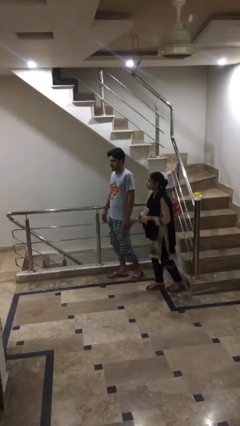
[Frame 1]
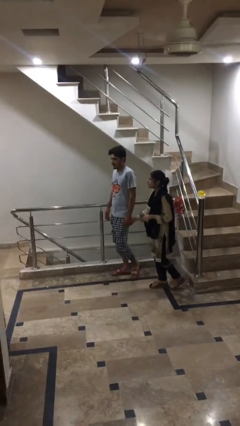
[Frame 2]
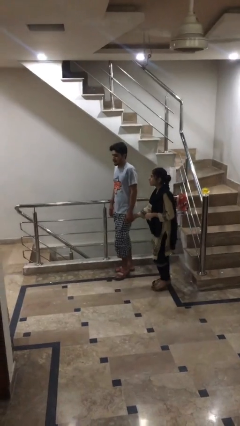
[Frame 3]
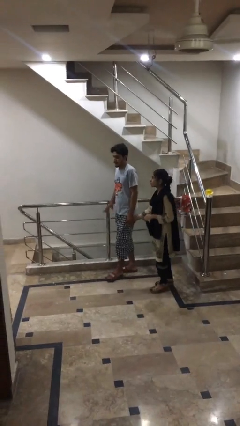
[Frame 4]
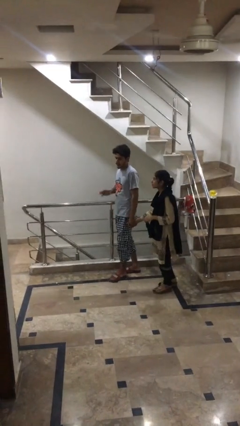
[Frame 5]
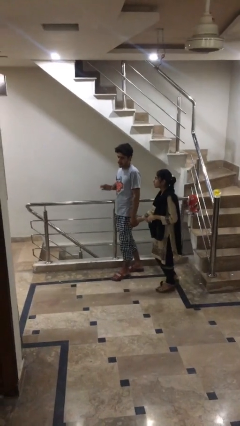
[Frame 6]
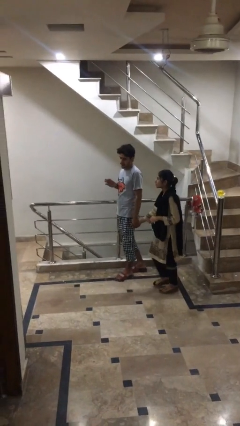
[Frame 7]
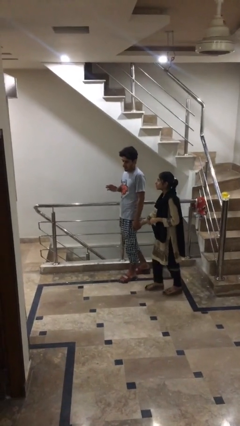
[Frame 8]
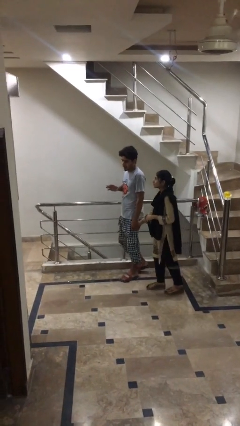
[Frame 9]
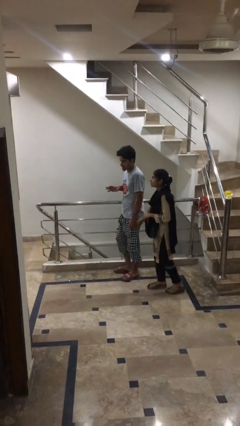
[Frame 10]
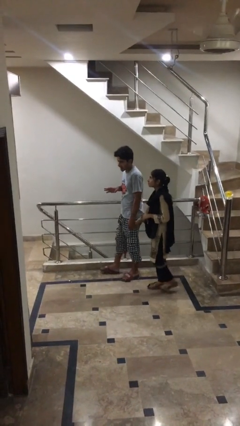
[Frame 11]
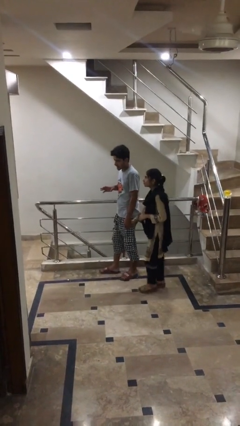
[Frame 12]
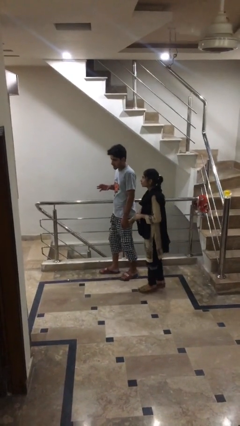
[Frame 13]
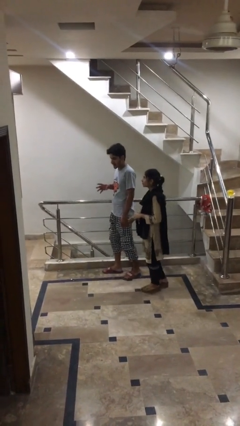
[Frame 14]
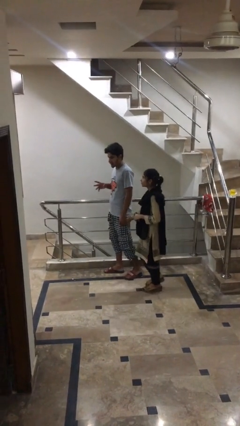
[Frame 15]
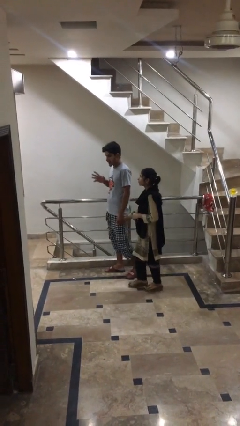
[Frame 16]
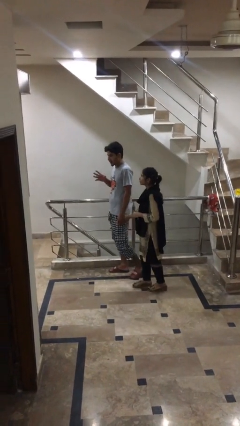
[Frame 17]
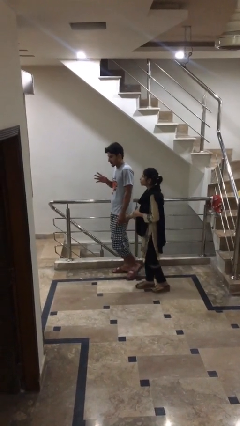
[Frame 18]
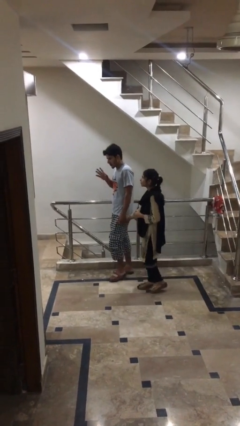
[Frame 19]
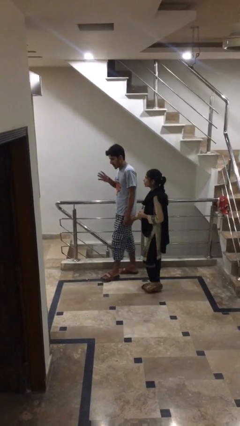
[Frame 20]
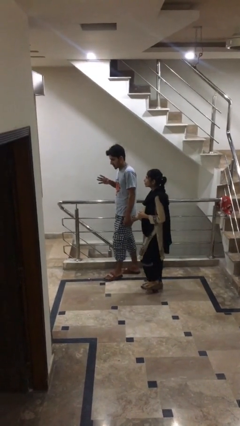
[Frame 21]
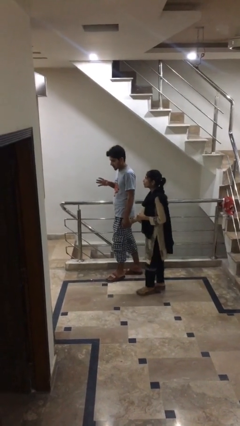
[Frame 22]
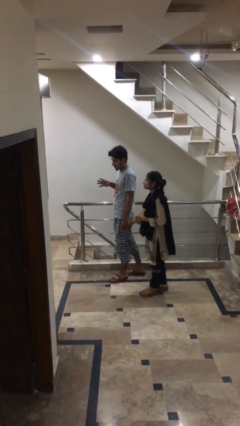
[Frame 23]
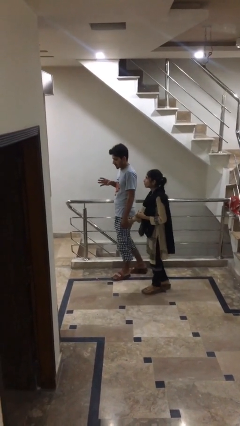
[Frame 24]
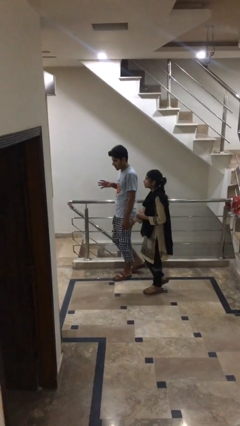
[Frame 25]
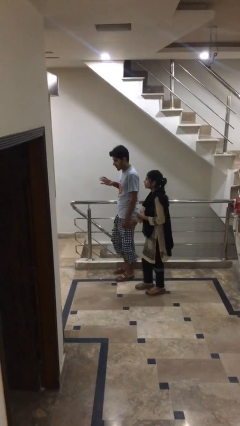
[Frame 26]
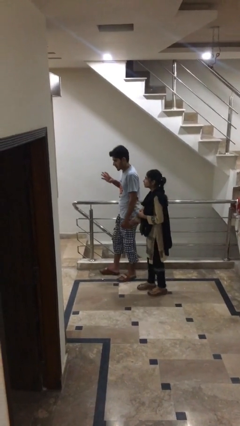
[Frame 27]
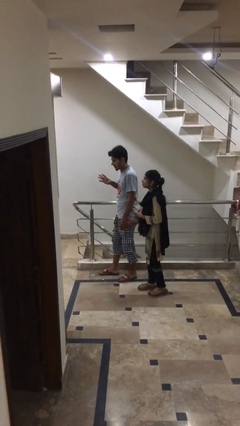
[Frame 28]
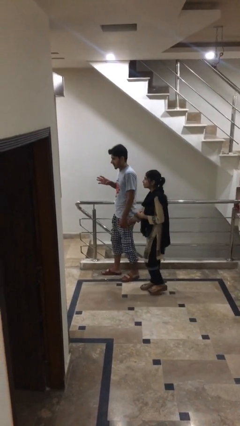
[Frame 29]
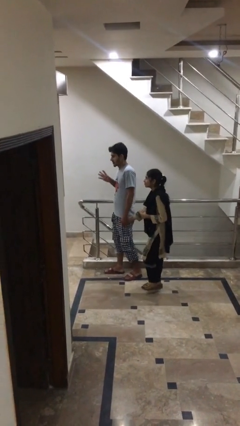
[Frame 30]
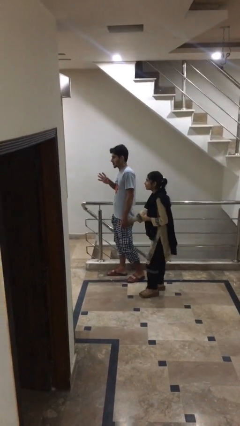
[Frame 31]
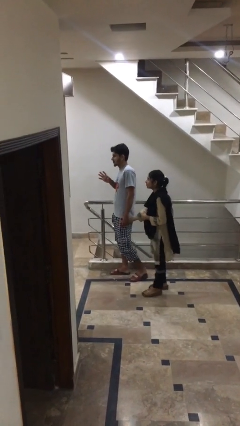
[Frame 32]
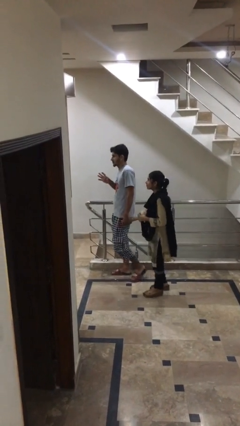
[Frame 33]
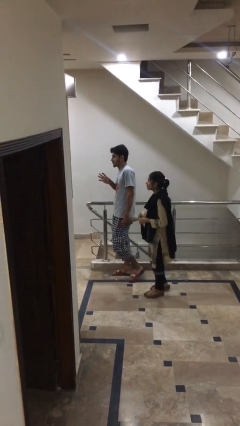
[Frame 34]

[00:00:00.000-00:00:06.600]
person holds hand

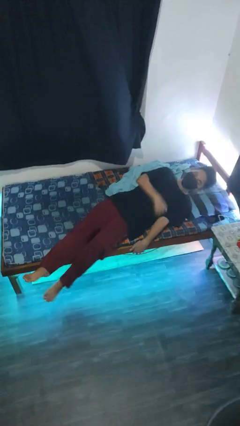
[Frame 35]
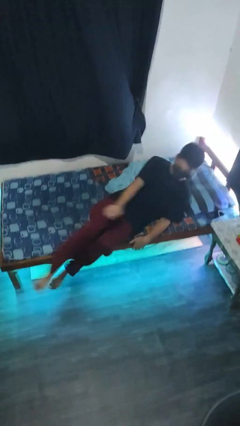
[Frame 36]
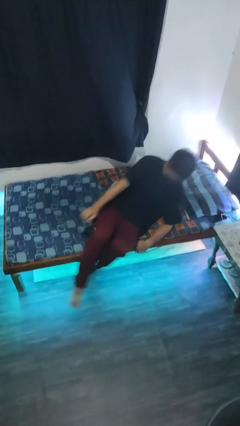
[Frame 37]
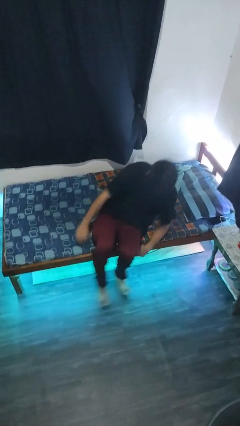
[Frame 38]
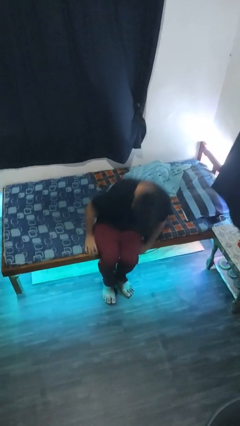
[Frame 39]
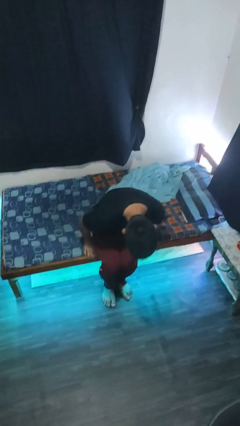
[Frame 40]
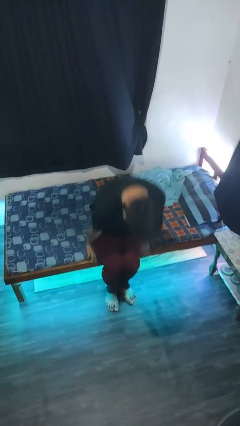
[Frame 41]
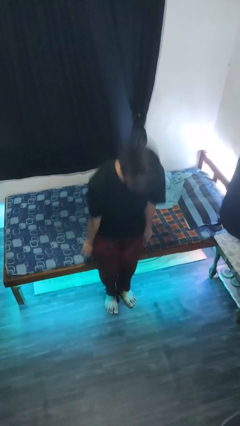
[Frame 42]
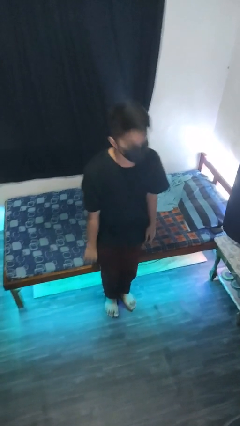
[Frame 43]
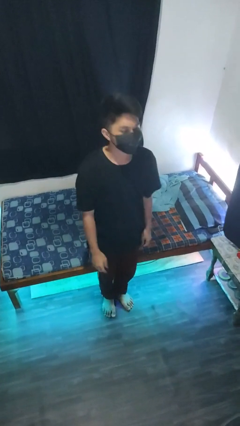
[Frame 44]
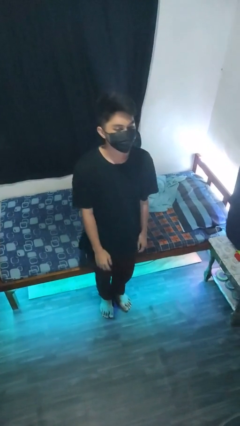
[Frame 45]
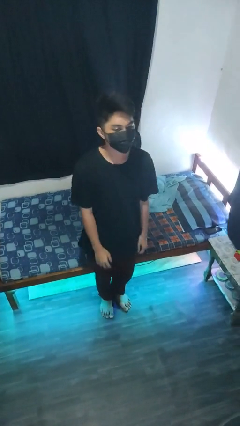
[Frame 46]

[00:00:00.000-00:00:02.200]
person stands up

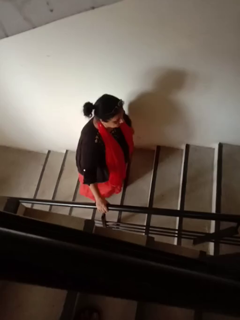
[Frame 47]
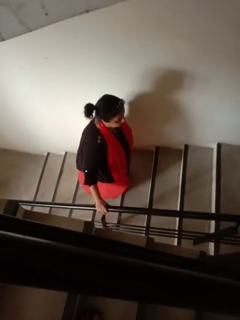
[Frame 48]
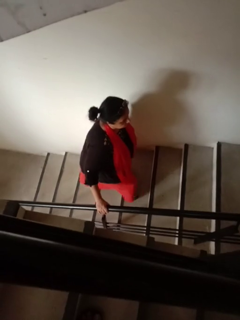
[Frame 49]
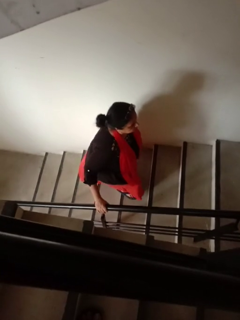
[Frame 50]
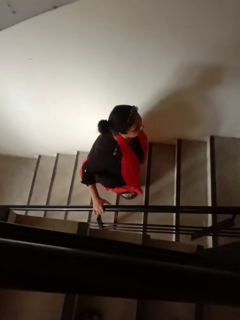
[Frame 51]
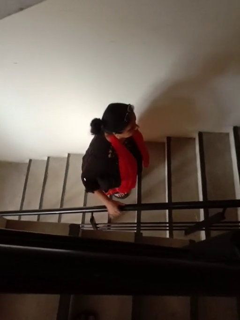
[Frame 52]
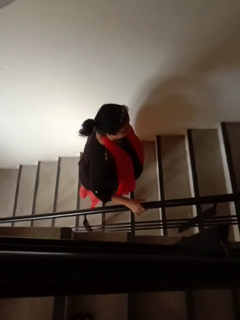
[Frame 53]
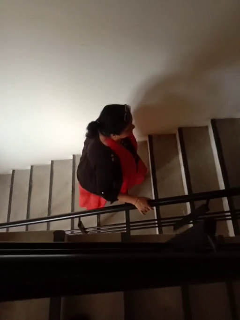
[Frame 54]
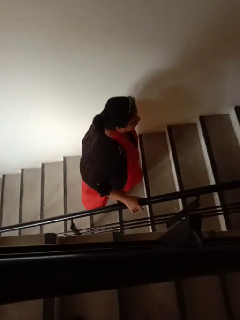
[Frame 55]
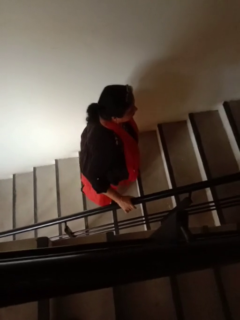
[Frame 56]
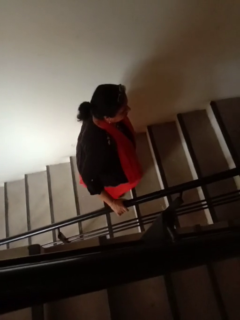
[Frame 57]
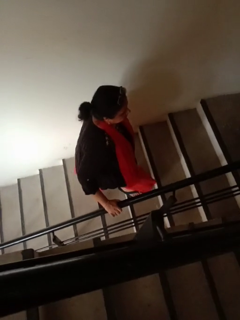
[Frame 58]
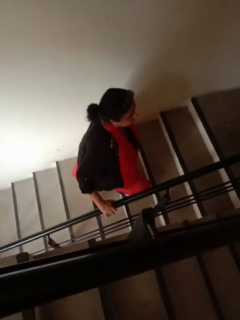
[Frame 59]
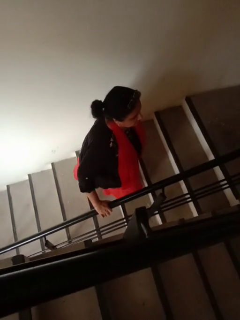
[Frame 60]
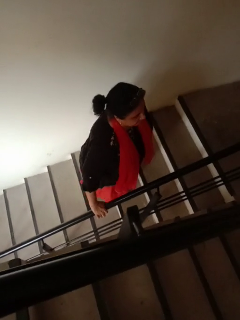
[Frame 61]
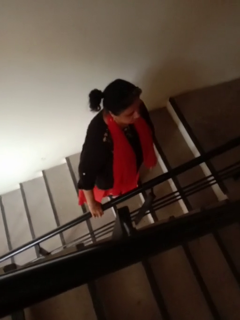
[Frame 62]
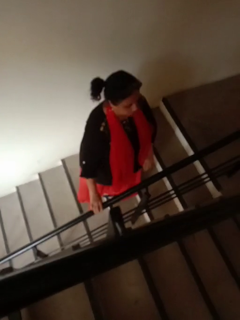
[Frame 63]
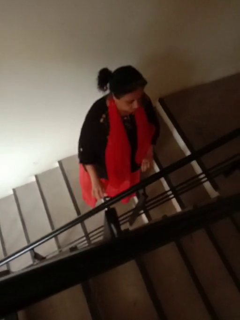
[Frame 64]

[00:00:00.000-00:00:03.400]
person climbs up stairs

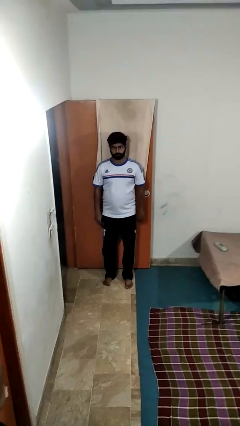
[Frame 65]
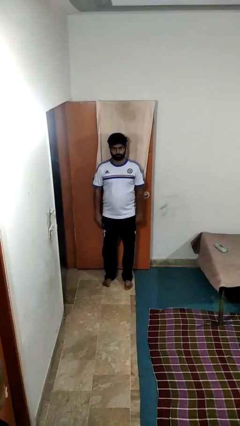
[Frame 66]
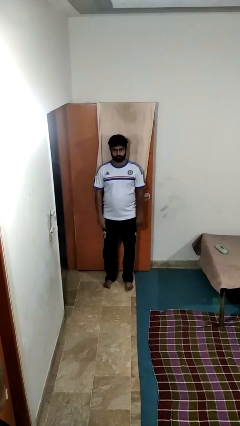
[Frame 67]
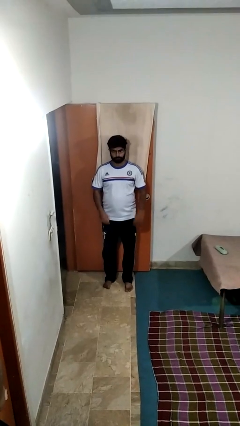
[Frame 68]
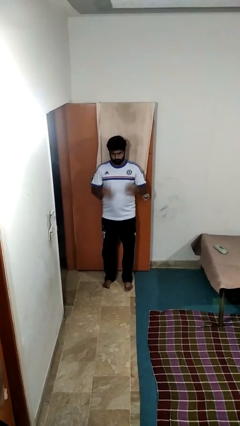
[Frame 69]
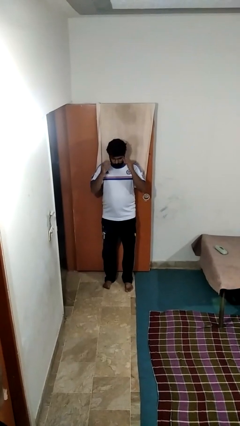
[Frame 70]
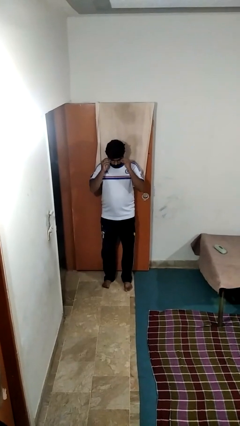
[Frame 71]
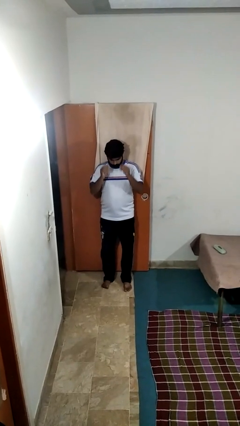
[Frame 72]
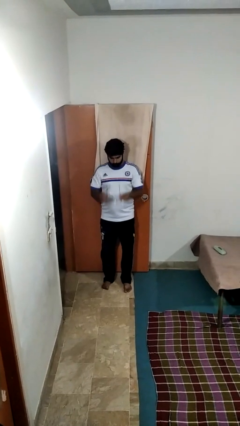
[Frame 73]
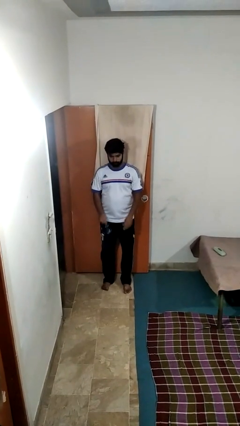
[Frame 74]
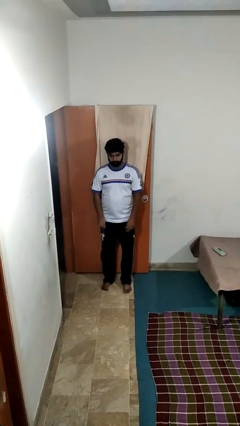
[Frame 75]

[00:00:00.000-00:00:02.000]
person takes off glasses

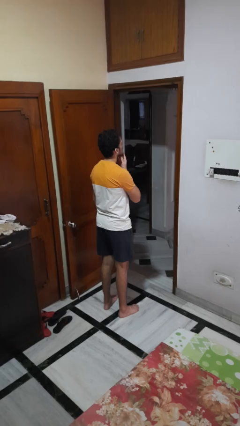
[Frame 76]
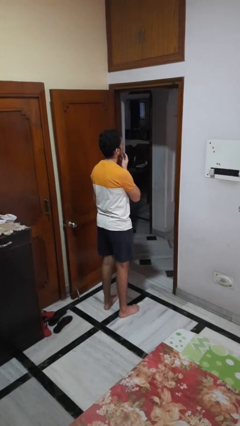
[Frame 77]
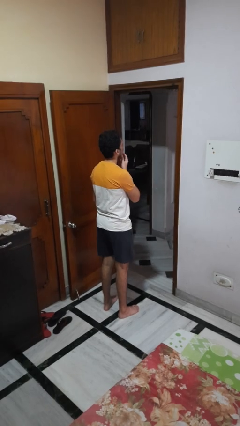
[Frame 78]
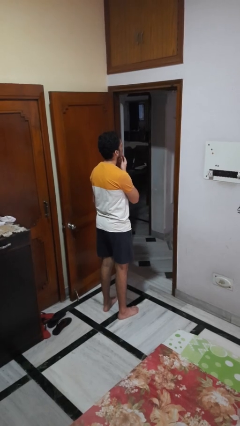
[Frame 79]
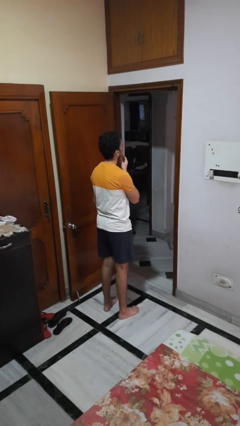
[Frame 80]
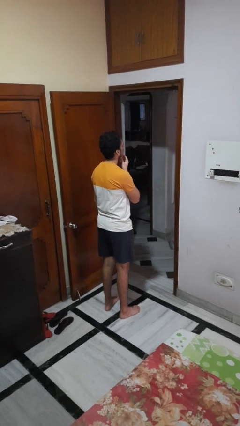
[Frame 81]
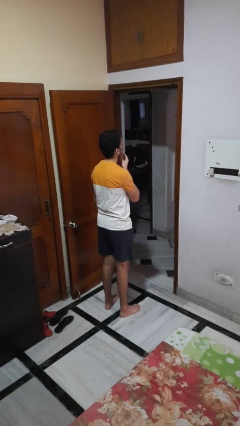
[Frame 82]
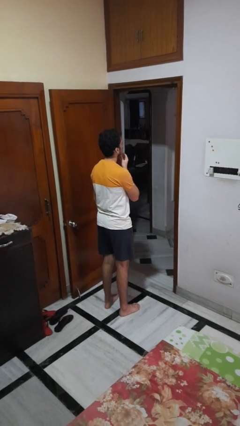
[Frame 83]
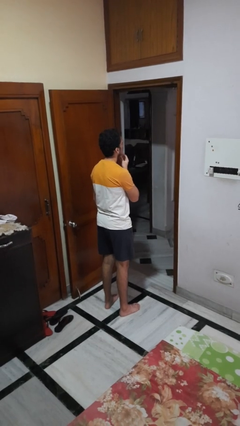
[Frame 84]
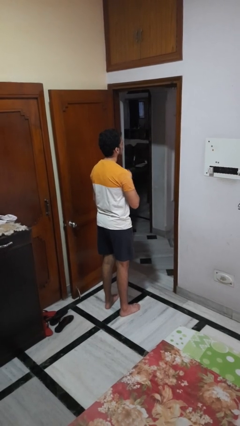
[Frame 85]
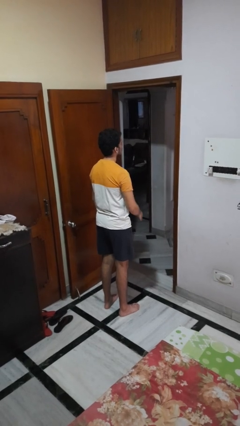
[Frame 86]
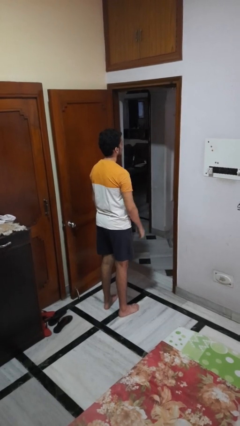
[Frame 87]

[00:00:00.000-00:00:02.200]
person strokes chin

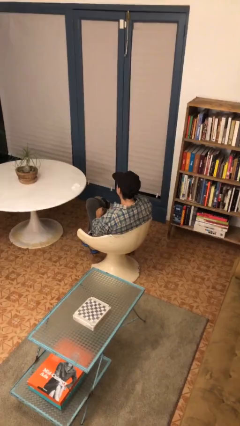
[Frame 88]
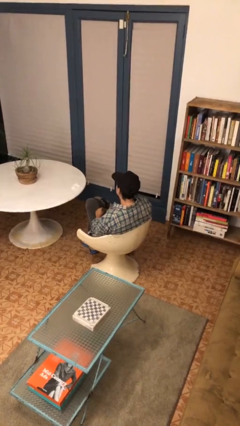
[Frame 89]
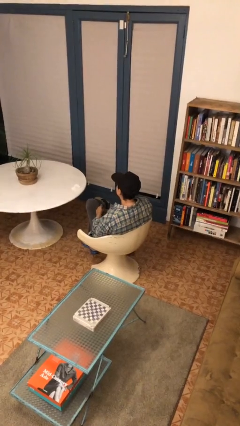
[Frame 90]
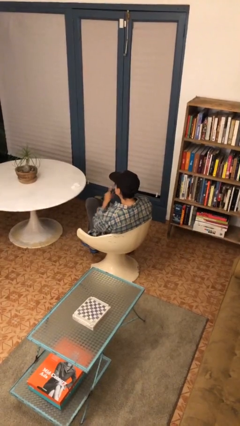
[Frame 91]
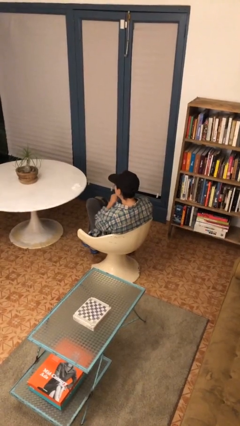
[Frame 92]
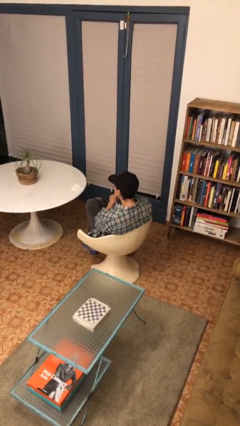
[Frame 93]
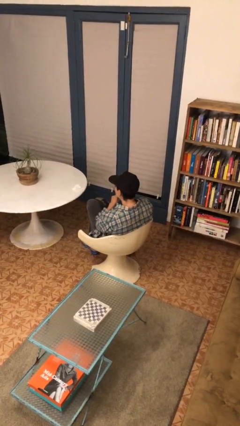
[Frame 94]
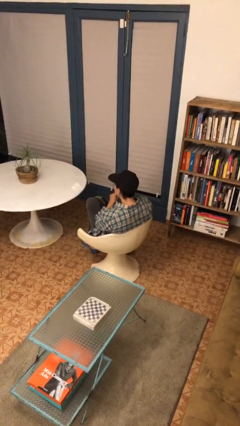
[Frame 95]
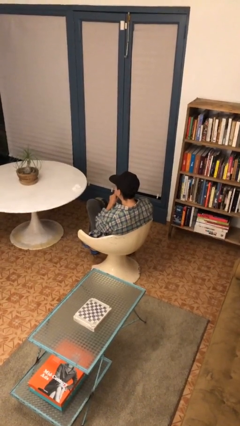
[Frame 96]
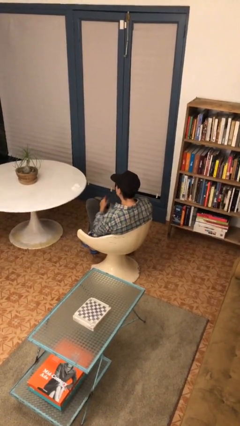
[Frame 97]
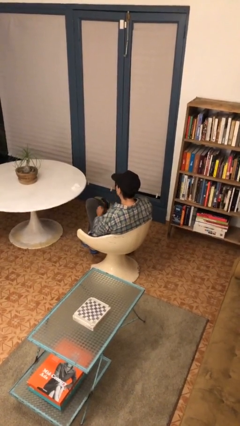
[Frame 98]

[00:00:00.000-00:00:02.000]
person gestures be quiet
